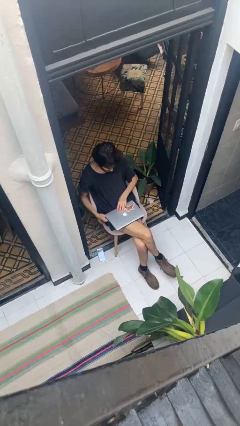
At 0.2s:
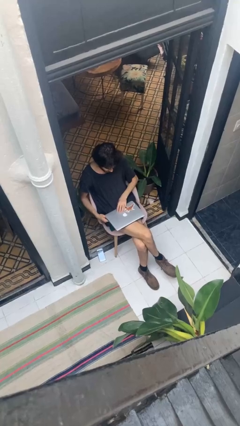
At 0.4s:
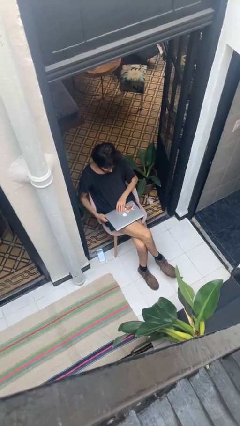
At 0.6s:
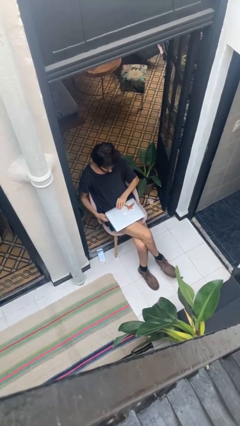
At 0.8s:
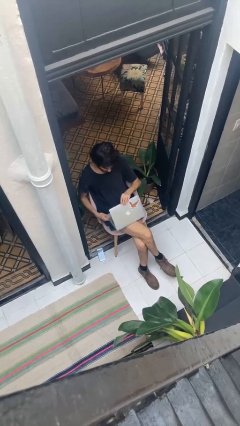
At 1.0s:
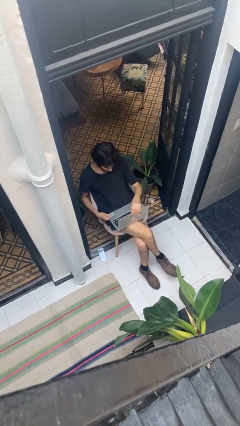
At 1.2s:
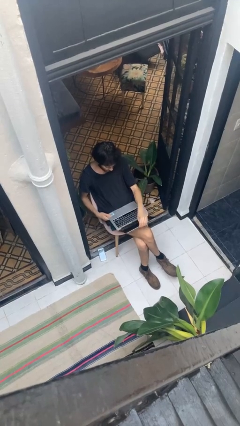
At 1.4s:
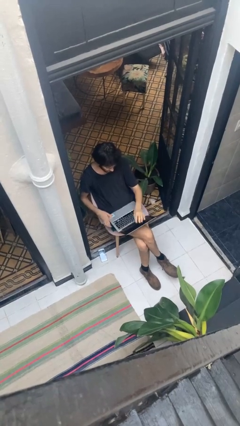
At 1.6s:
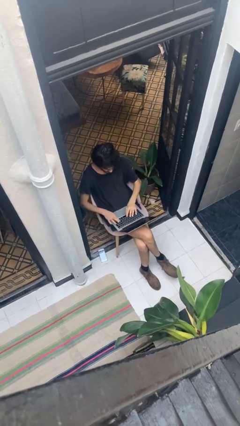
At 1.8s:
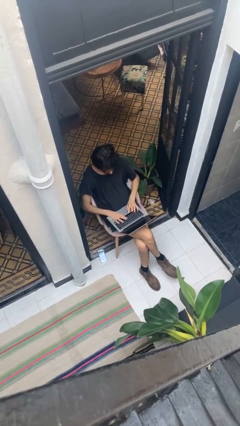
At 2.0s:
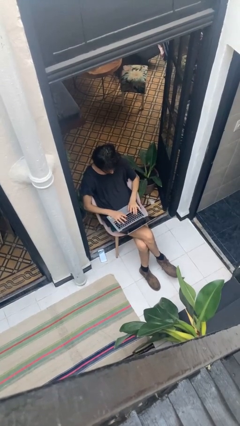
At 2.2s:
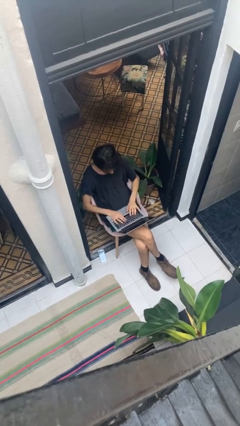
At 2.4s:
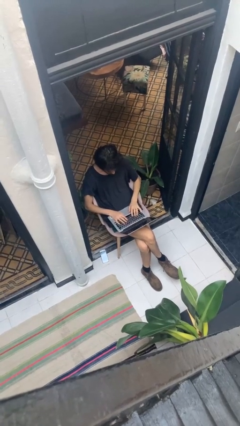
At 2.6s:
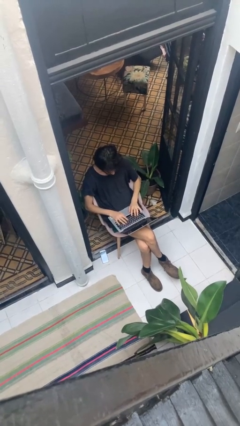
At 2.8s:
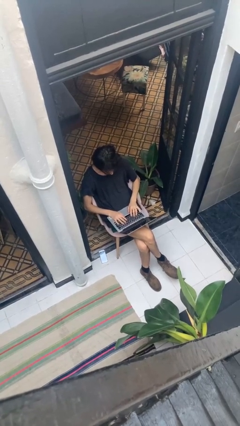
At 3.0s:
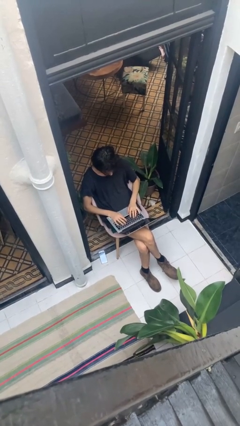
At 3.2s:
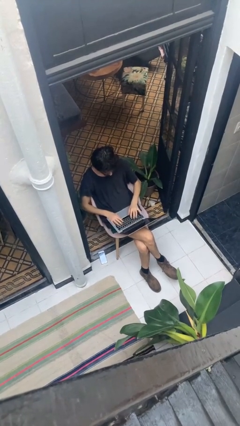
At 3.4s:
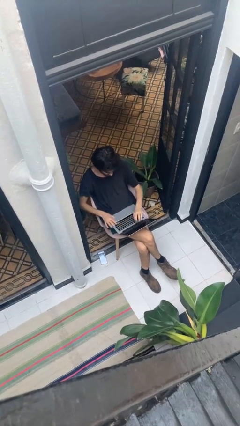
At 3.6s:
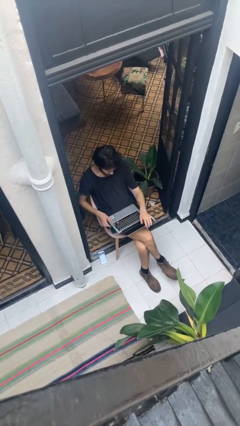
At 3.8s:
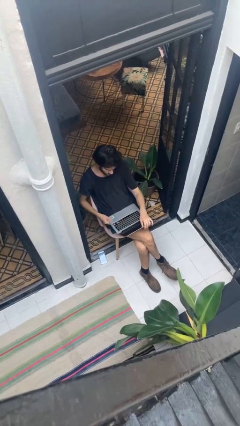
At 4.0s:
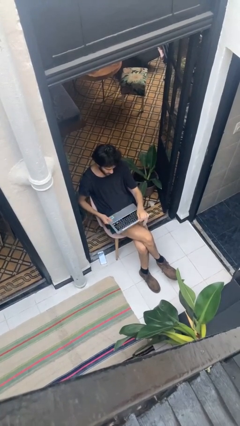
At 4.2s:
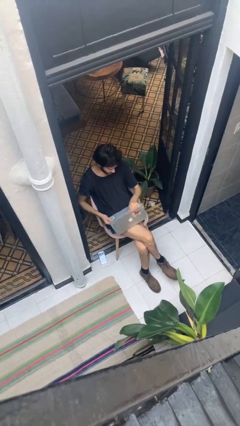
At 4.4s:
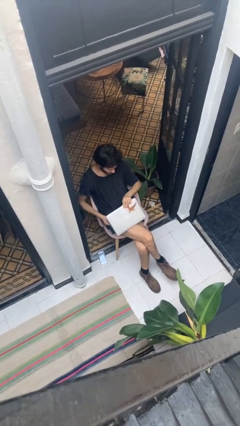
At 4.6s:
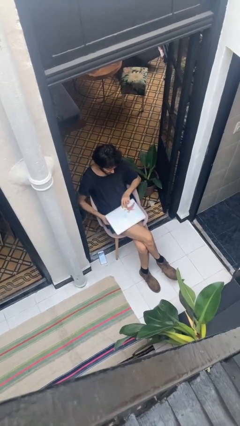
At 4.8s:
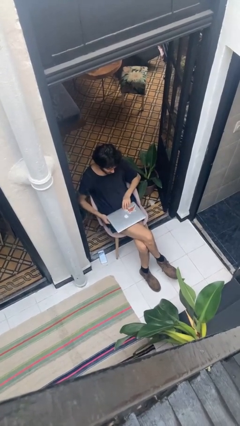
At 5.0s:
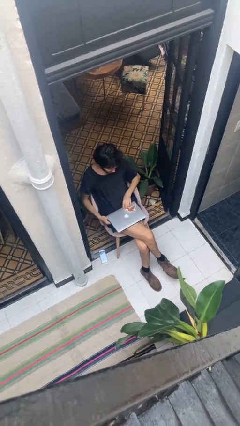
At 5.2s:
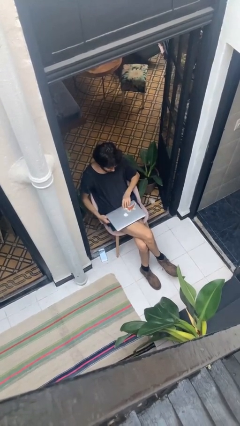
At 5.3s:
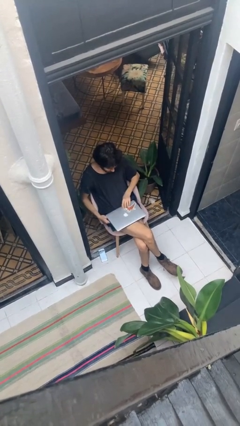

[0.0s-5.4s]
person interacts with laptop

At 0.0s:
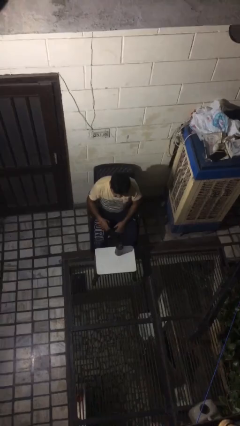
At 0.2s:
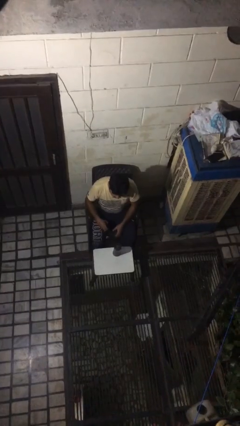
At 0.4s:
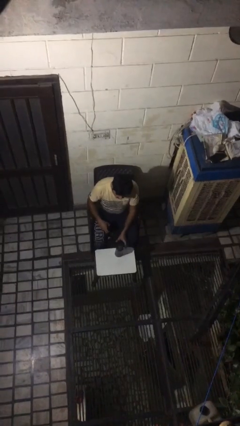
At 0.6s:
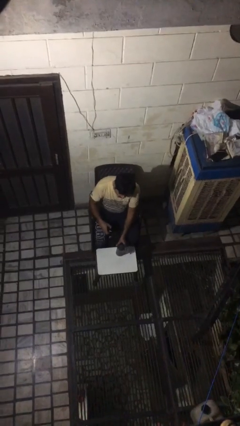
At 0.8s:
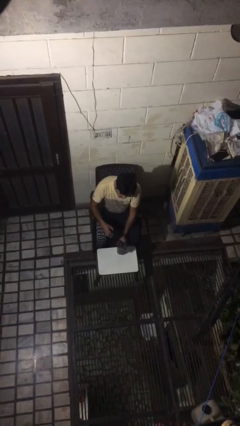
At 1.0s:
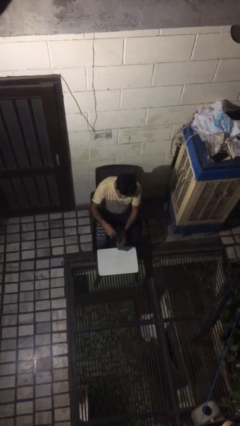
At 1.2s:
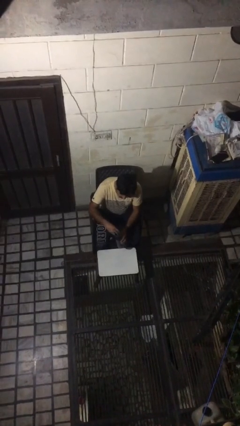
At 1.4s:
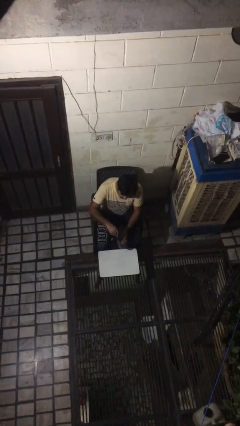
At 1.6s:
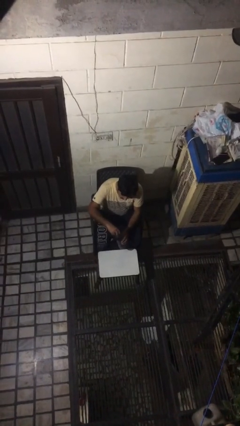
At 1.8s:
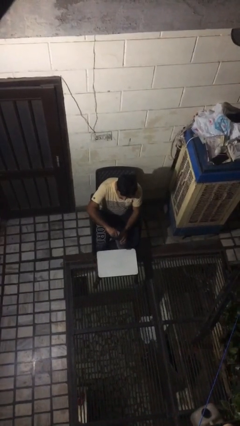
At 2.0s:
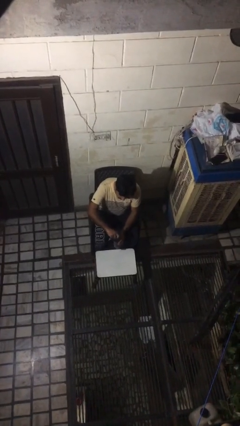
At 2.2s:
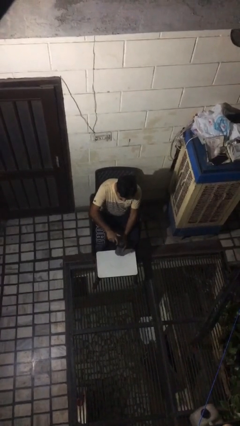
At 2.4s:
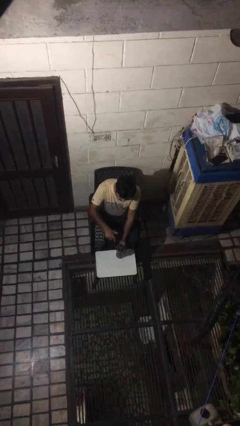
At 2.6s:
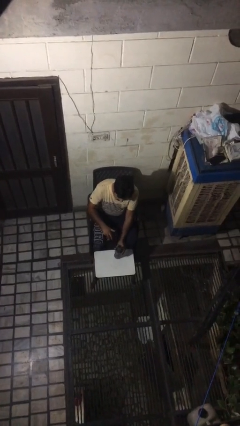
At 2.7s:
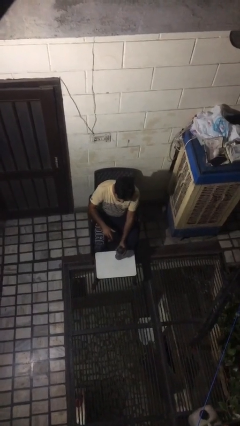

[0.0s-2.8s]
person screws lid to bottle

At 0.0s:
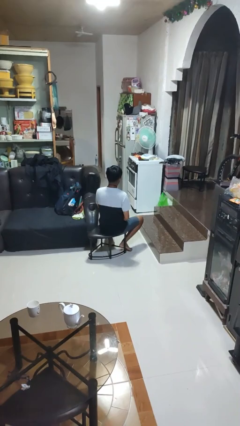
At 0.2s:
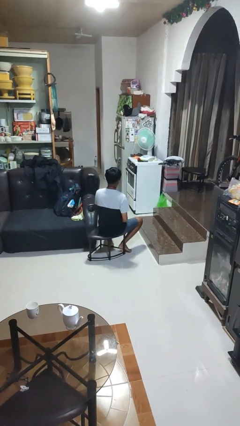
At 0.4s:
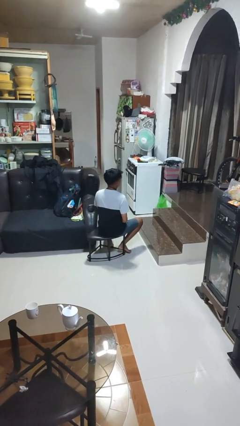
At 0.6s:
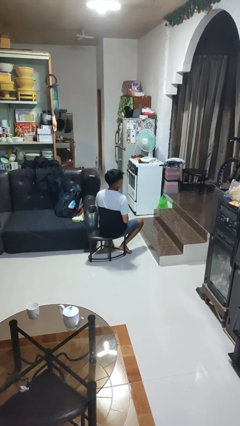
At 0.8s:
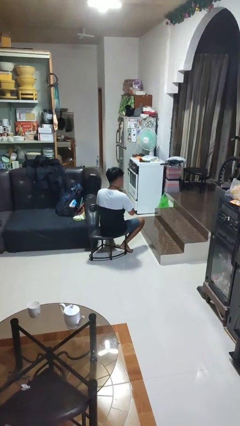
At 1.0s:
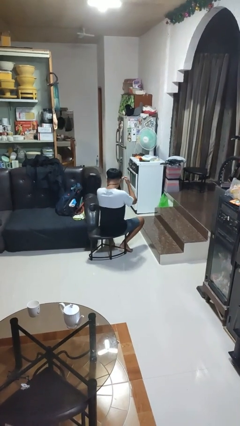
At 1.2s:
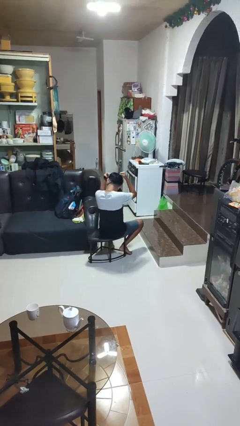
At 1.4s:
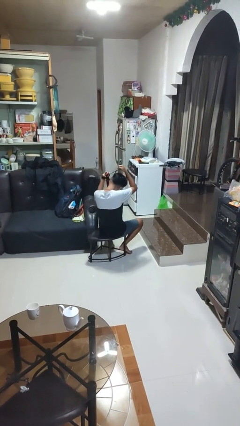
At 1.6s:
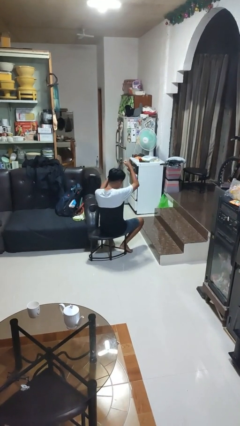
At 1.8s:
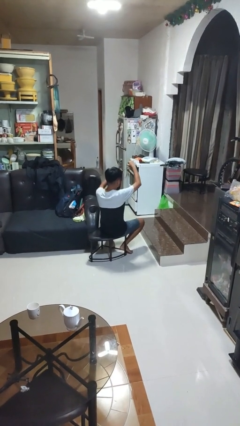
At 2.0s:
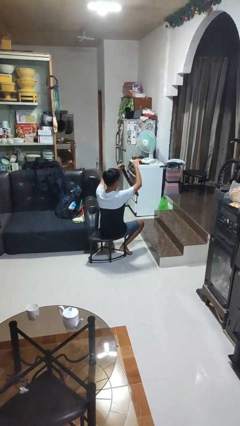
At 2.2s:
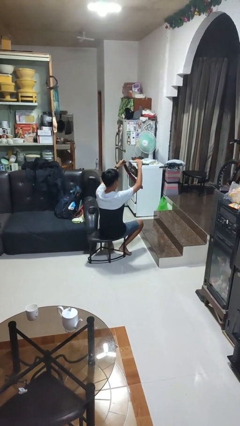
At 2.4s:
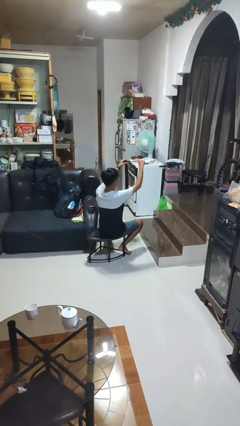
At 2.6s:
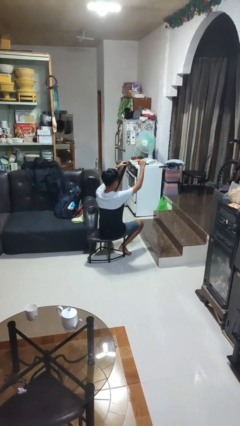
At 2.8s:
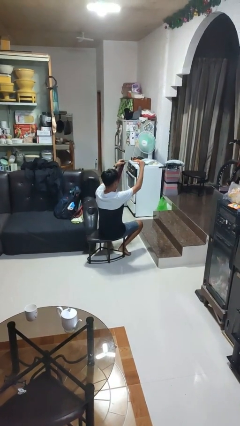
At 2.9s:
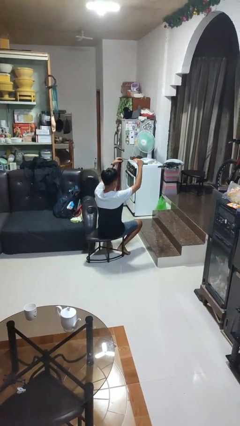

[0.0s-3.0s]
person takes off necktie

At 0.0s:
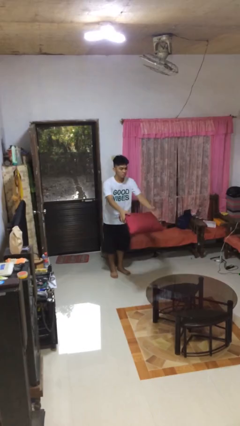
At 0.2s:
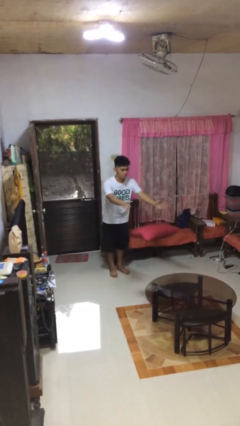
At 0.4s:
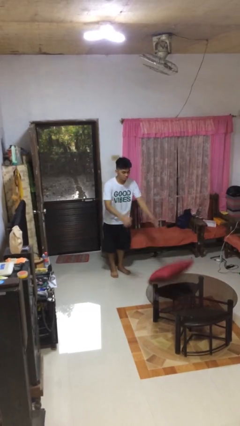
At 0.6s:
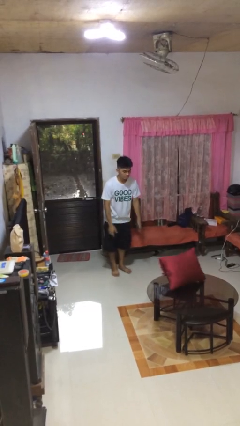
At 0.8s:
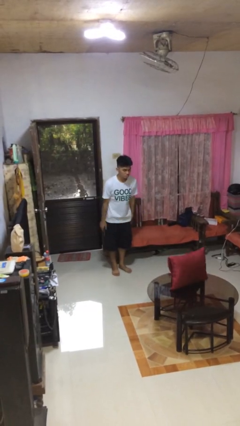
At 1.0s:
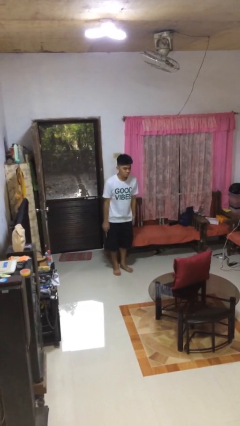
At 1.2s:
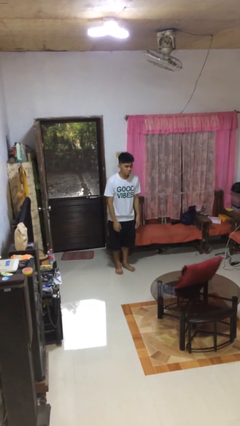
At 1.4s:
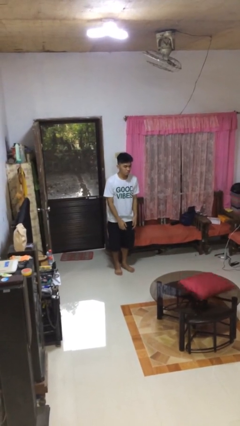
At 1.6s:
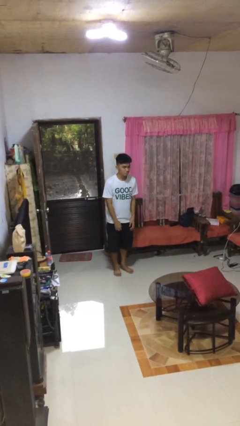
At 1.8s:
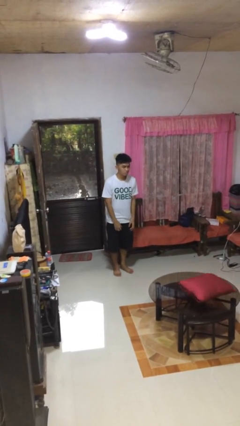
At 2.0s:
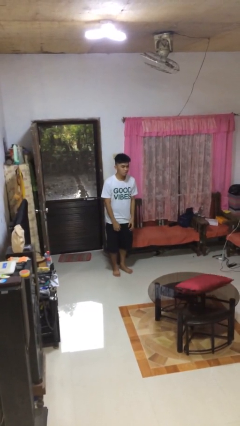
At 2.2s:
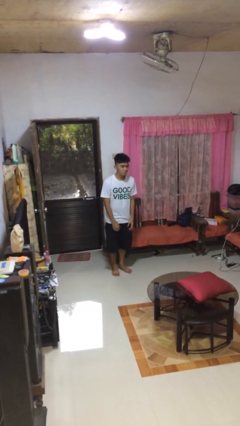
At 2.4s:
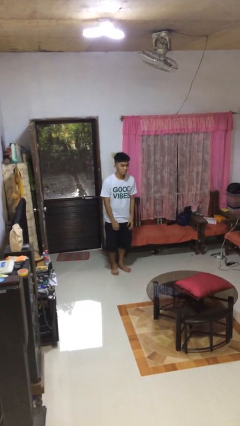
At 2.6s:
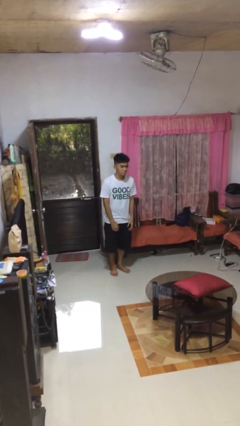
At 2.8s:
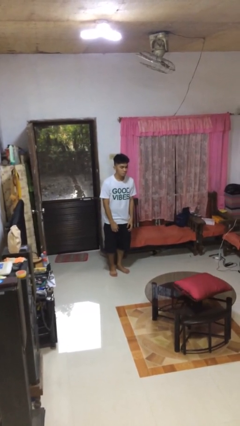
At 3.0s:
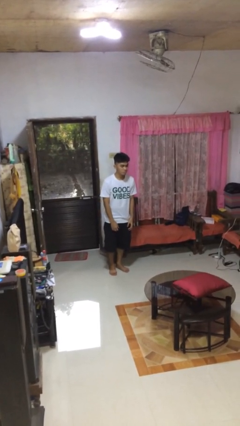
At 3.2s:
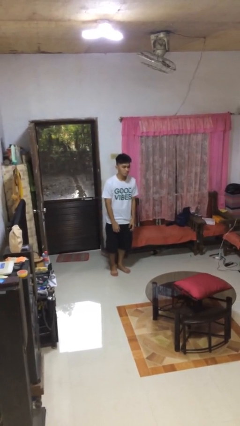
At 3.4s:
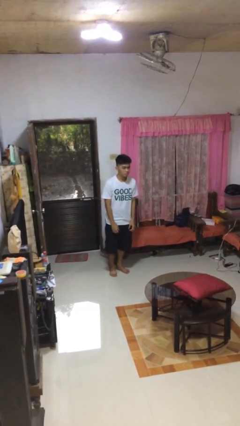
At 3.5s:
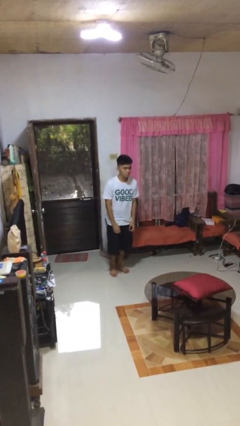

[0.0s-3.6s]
person throws object on table

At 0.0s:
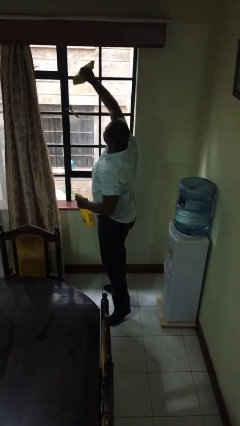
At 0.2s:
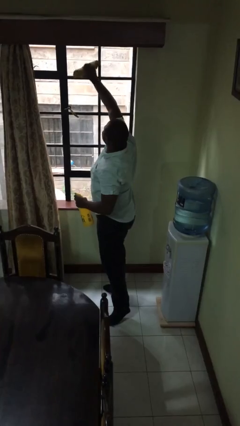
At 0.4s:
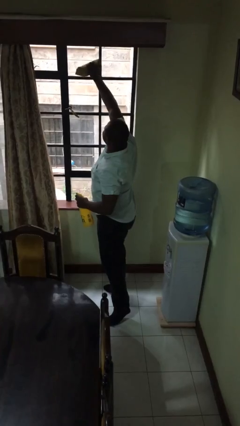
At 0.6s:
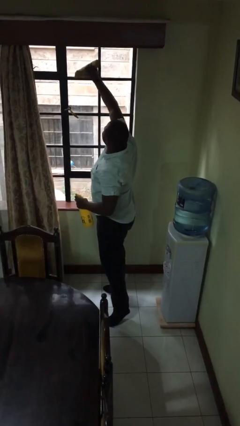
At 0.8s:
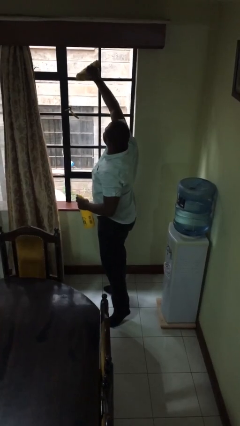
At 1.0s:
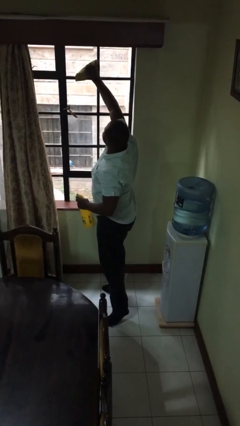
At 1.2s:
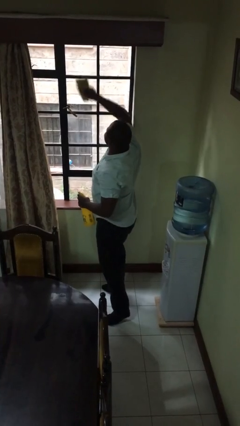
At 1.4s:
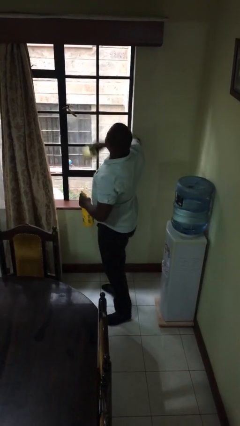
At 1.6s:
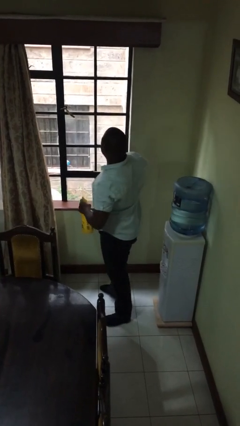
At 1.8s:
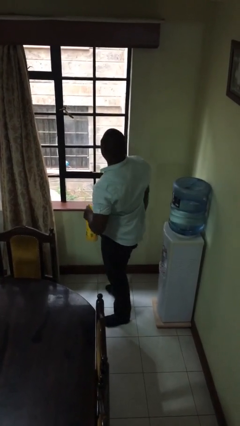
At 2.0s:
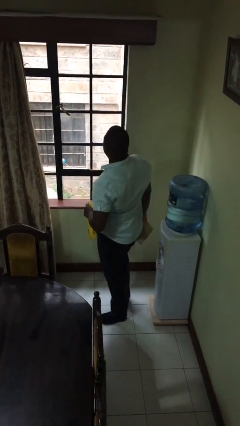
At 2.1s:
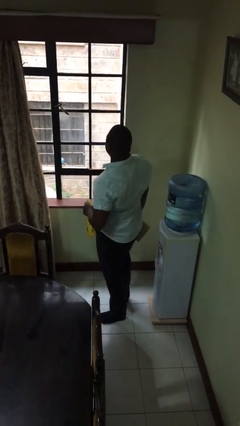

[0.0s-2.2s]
person washes window

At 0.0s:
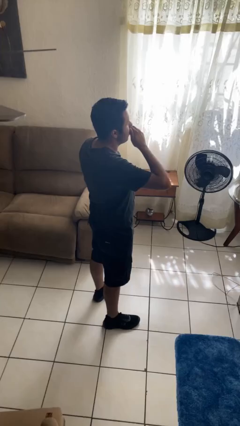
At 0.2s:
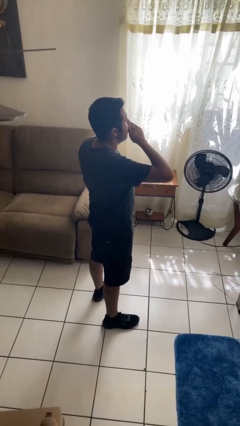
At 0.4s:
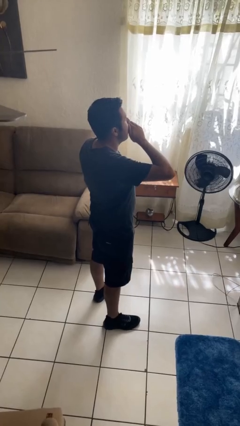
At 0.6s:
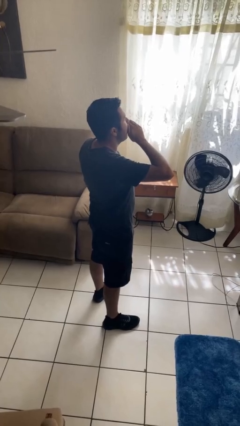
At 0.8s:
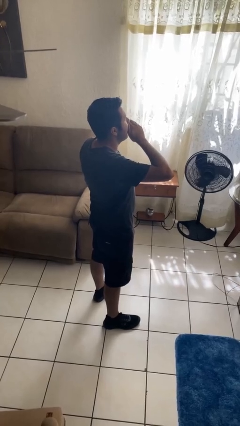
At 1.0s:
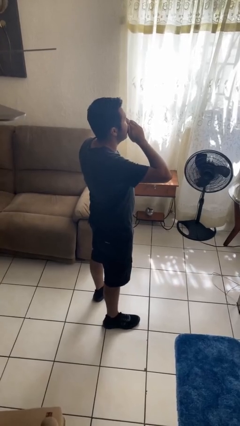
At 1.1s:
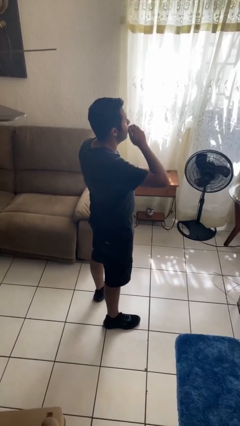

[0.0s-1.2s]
person yawns
